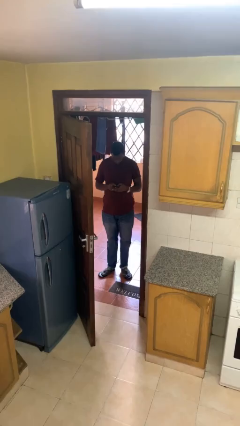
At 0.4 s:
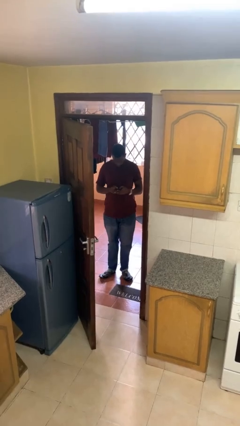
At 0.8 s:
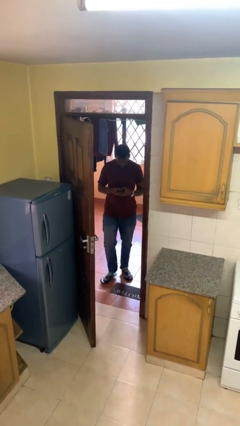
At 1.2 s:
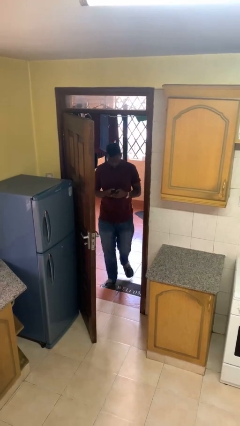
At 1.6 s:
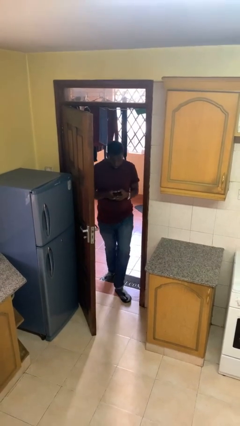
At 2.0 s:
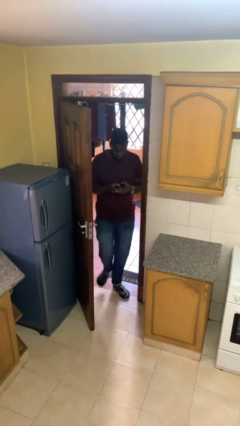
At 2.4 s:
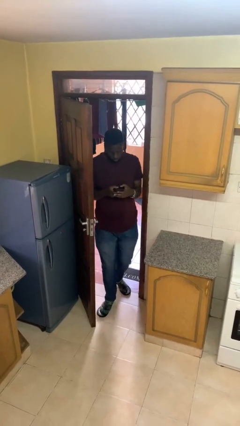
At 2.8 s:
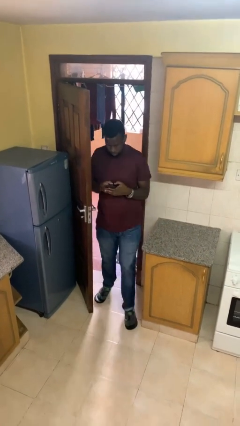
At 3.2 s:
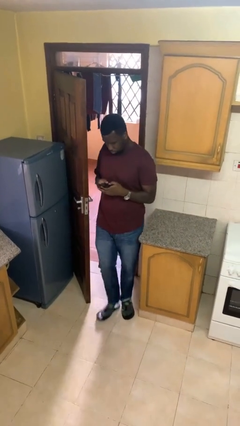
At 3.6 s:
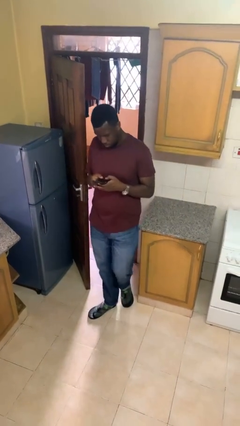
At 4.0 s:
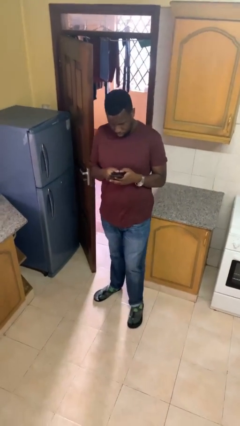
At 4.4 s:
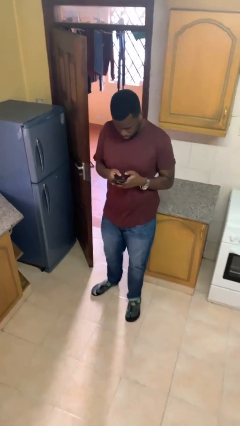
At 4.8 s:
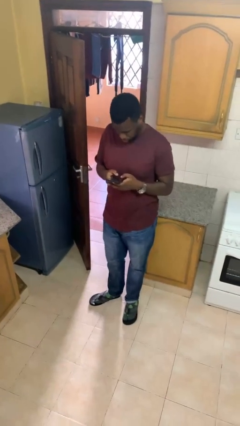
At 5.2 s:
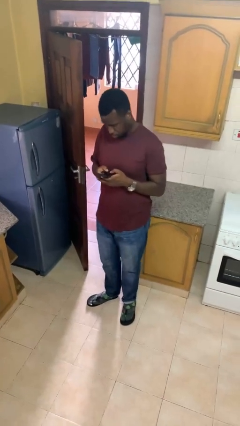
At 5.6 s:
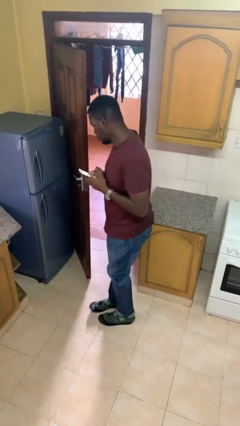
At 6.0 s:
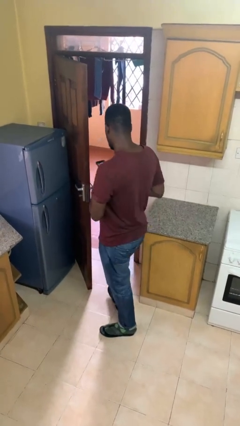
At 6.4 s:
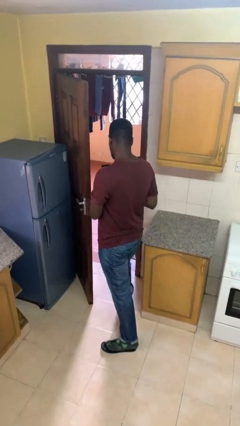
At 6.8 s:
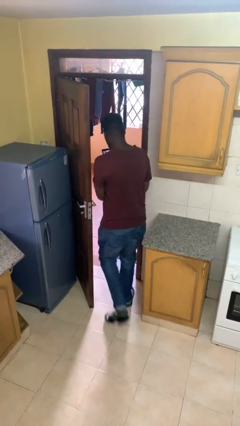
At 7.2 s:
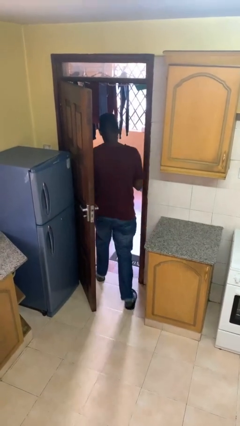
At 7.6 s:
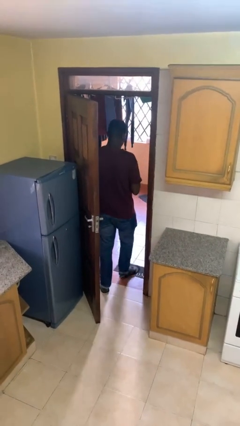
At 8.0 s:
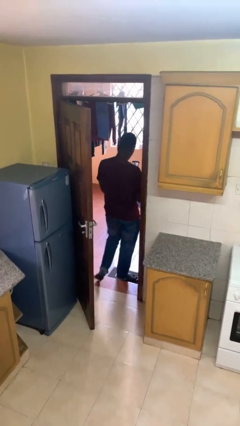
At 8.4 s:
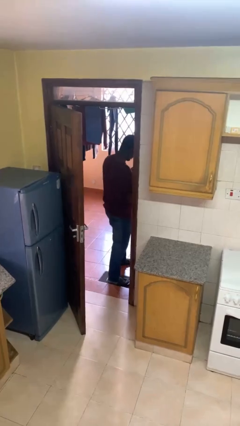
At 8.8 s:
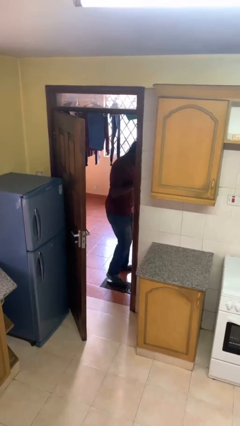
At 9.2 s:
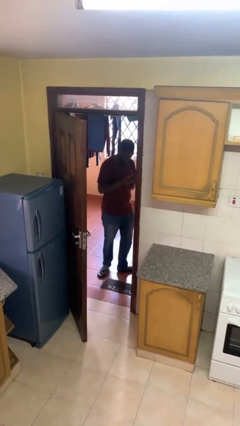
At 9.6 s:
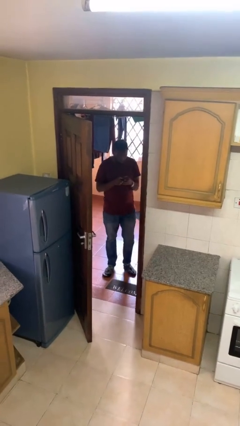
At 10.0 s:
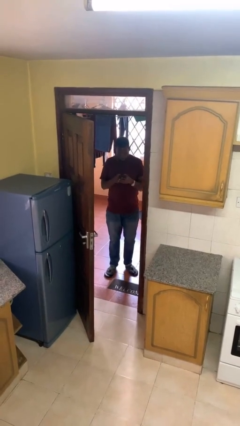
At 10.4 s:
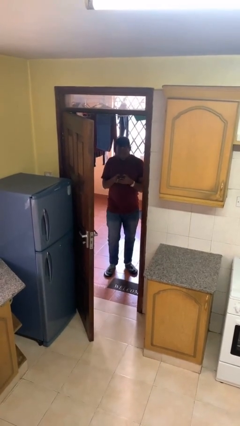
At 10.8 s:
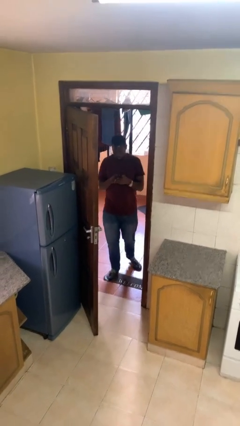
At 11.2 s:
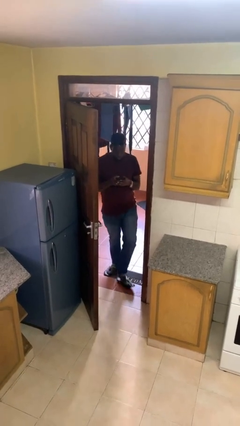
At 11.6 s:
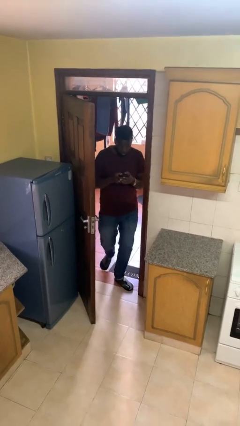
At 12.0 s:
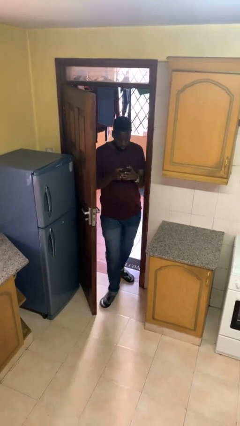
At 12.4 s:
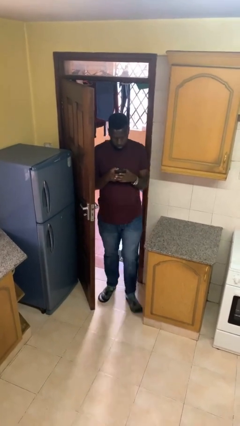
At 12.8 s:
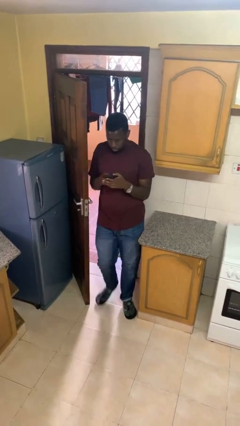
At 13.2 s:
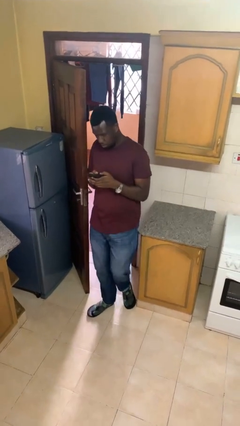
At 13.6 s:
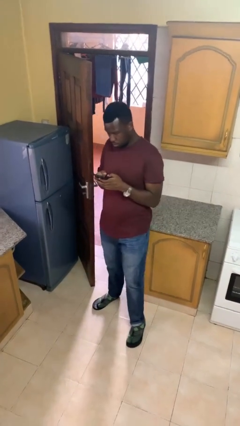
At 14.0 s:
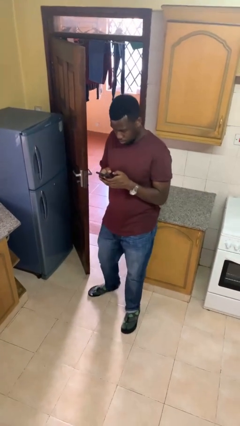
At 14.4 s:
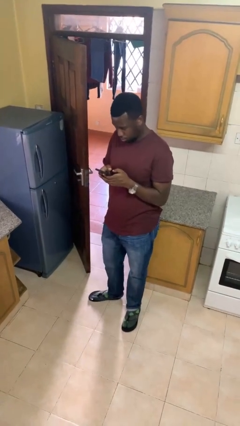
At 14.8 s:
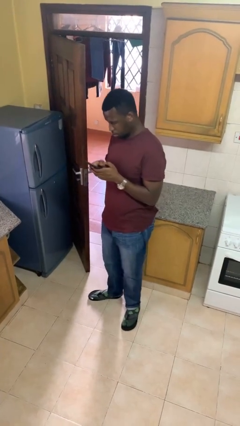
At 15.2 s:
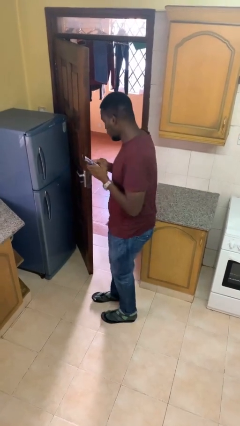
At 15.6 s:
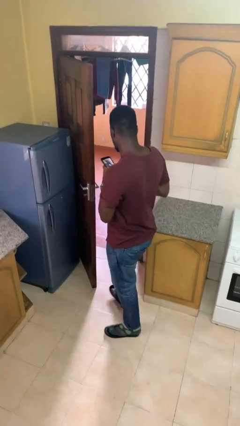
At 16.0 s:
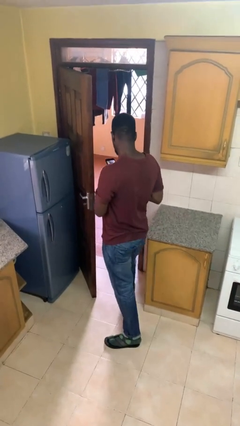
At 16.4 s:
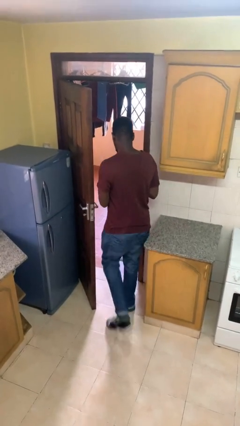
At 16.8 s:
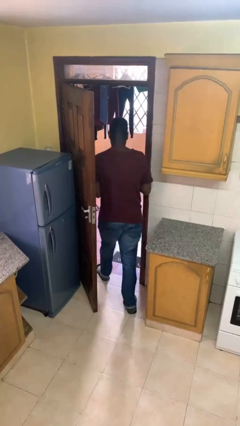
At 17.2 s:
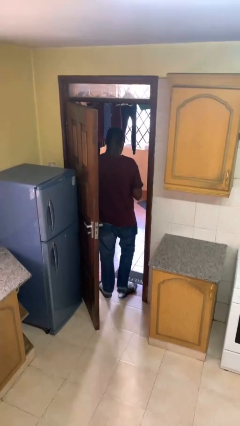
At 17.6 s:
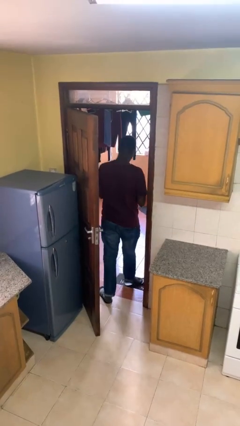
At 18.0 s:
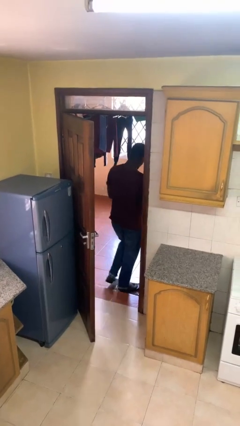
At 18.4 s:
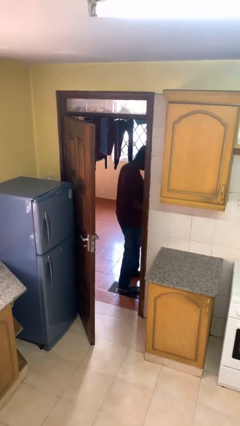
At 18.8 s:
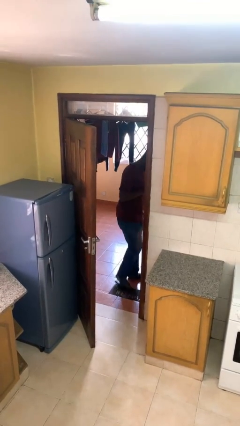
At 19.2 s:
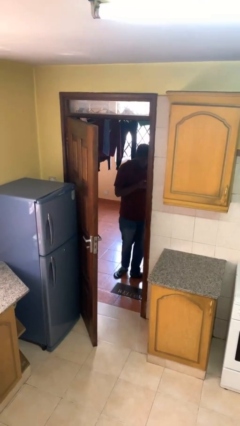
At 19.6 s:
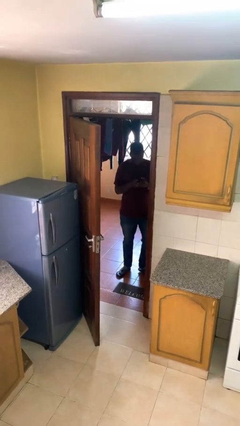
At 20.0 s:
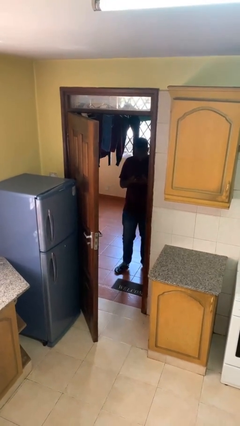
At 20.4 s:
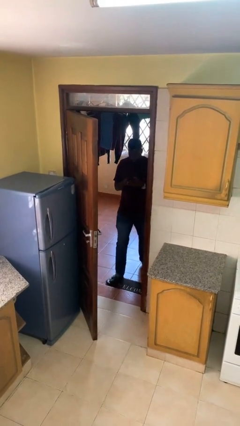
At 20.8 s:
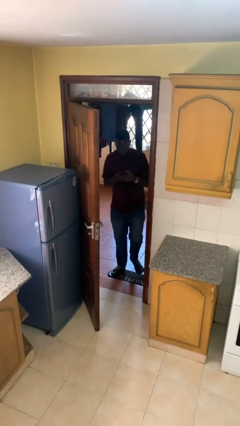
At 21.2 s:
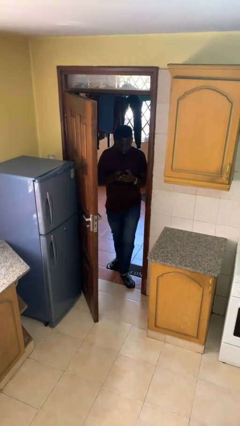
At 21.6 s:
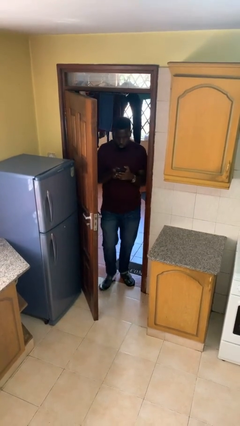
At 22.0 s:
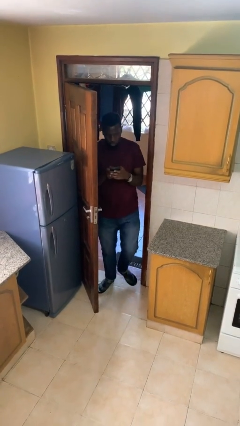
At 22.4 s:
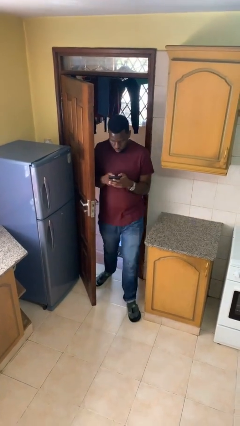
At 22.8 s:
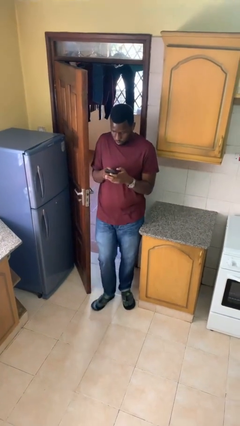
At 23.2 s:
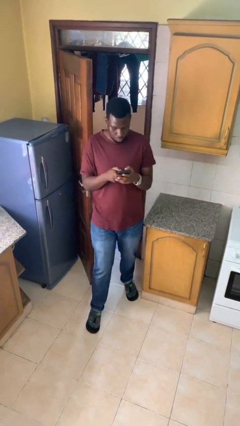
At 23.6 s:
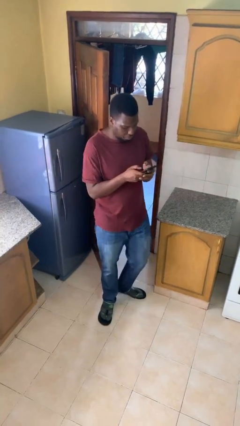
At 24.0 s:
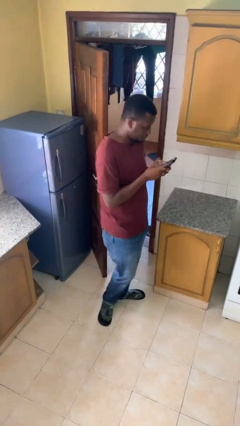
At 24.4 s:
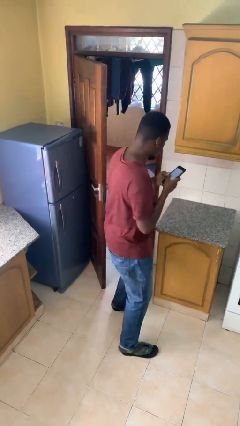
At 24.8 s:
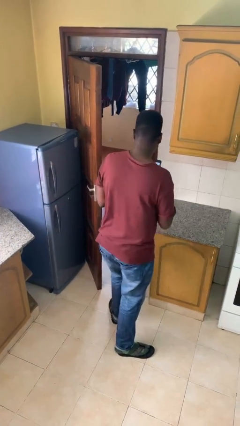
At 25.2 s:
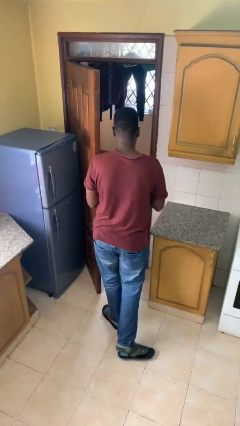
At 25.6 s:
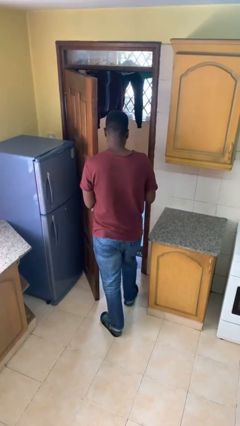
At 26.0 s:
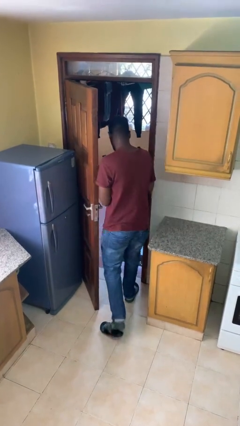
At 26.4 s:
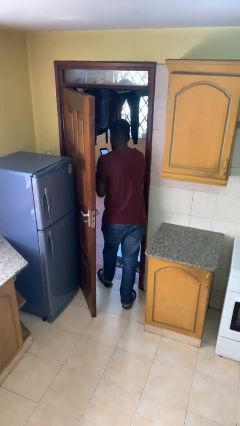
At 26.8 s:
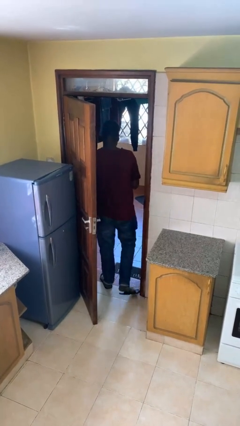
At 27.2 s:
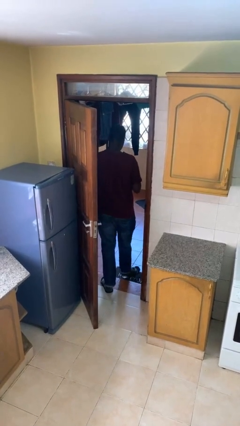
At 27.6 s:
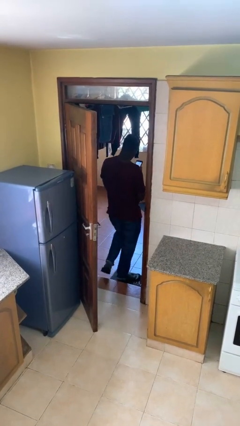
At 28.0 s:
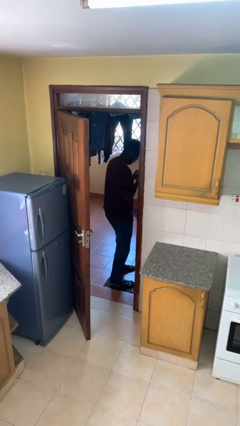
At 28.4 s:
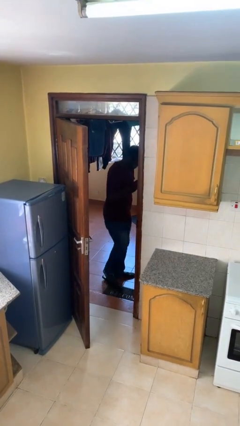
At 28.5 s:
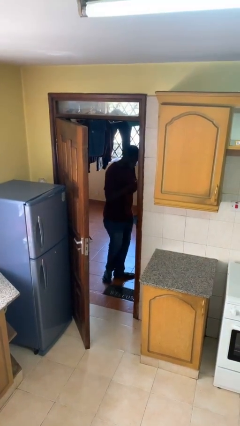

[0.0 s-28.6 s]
person texts on phone

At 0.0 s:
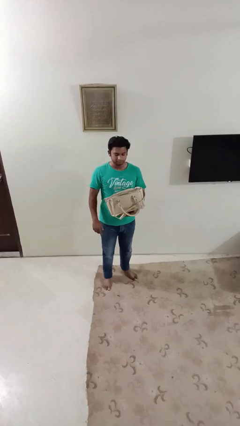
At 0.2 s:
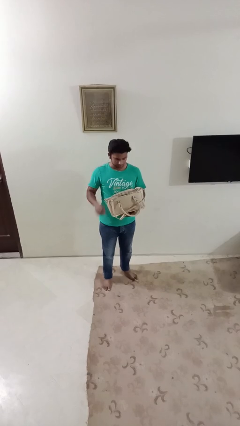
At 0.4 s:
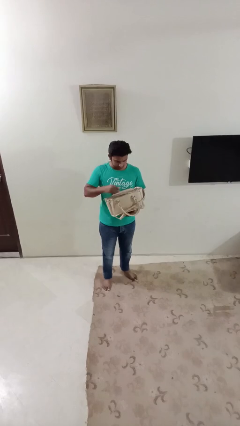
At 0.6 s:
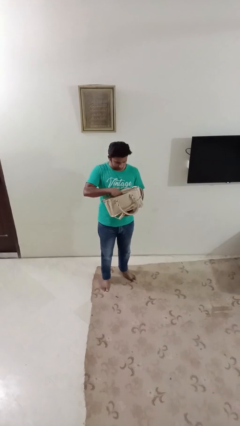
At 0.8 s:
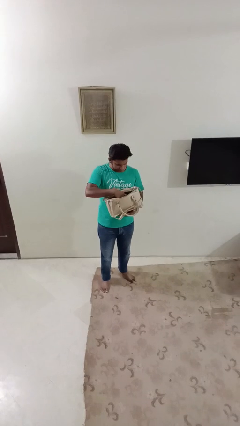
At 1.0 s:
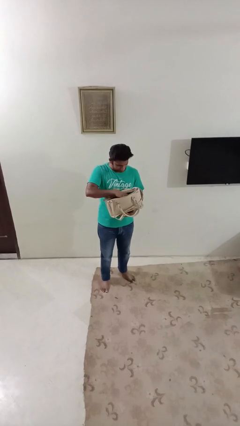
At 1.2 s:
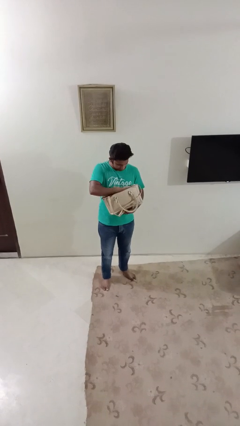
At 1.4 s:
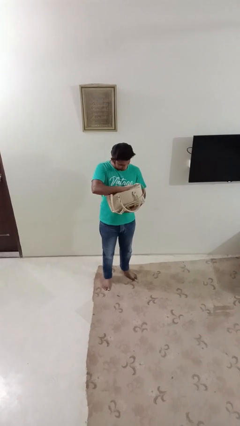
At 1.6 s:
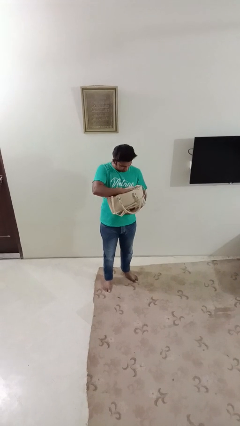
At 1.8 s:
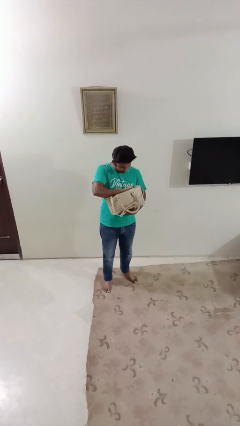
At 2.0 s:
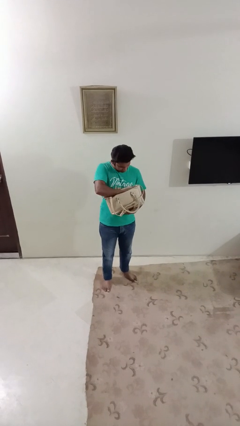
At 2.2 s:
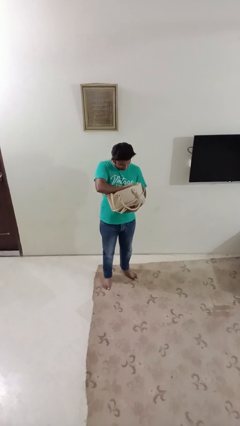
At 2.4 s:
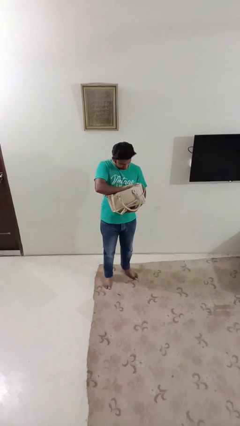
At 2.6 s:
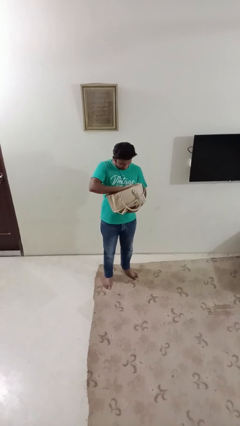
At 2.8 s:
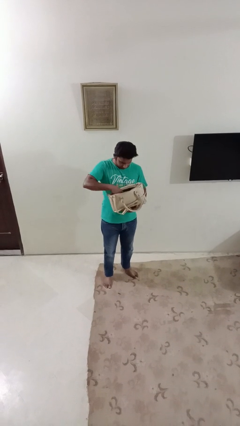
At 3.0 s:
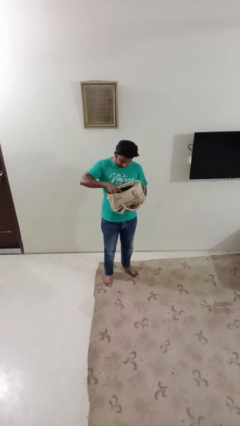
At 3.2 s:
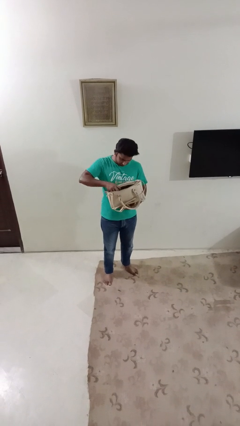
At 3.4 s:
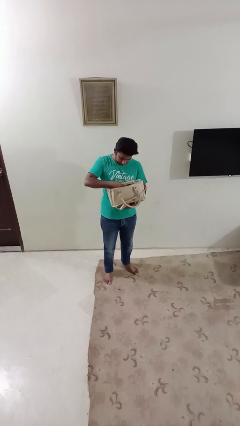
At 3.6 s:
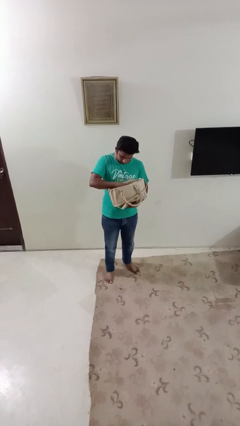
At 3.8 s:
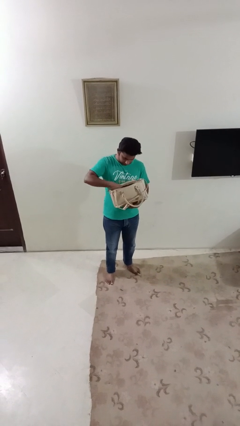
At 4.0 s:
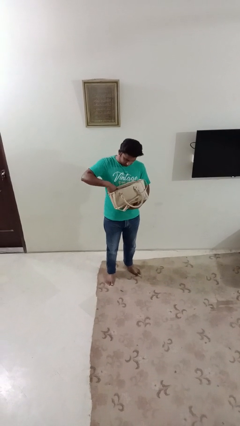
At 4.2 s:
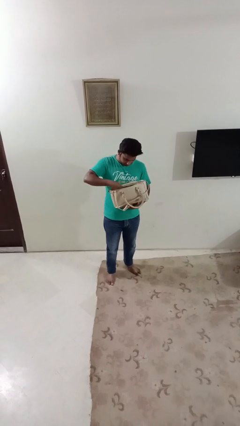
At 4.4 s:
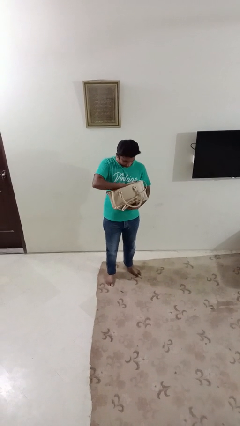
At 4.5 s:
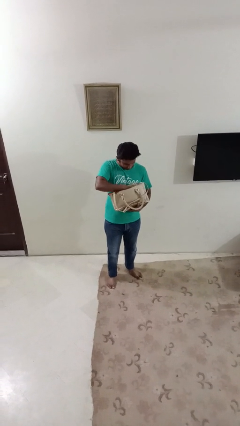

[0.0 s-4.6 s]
person searches in purse
